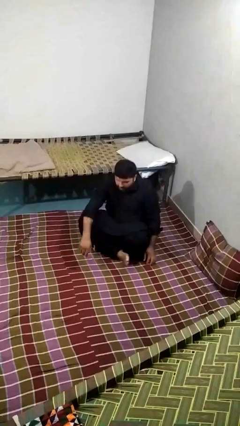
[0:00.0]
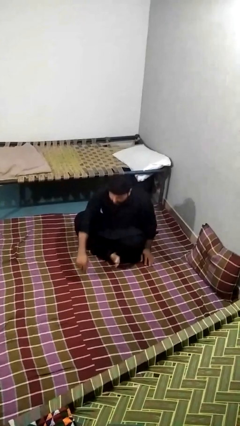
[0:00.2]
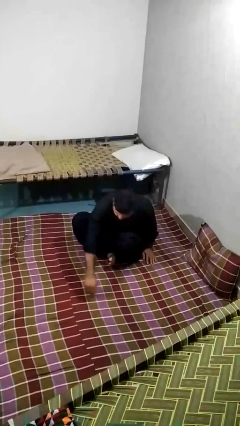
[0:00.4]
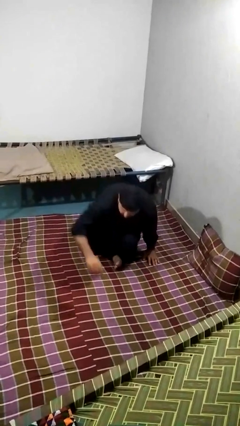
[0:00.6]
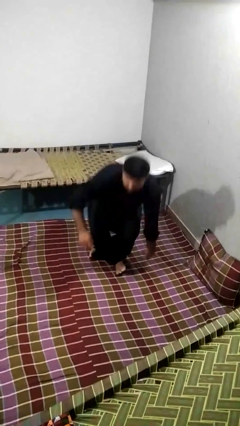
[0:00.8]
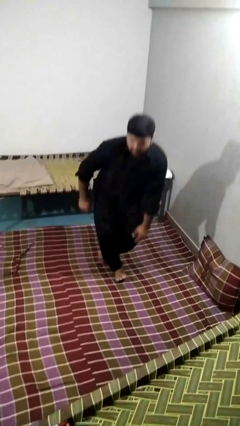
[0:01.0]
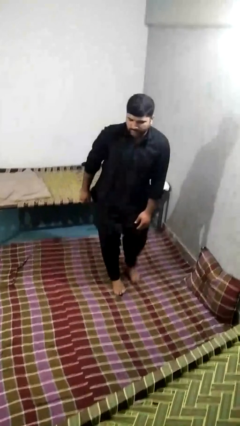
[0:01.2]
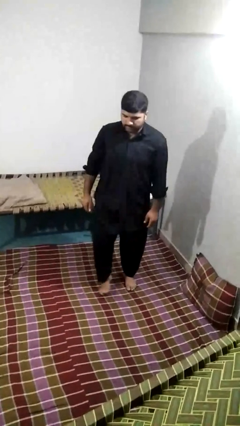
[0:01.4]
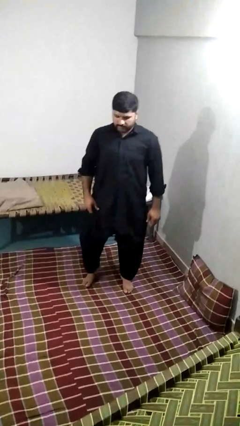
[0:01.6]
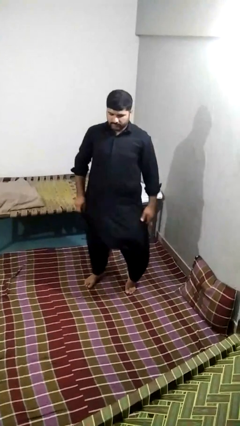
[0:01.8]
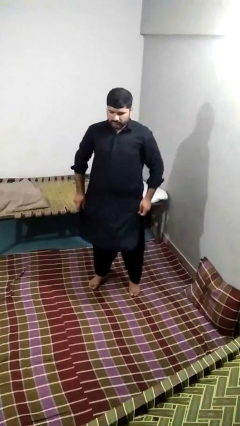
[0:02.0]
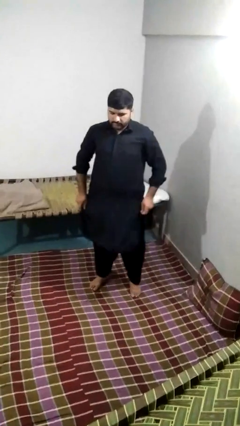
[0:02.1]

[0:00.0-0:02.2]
person stands up from floor

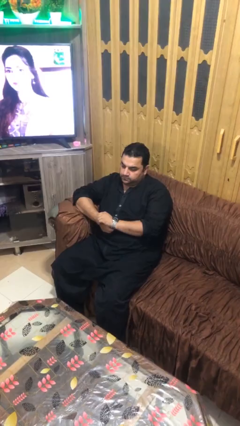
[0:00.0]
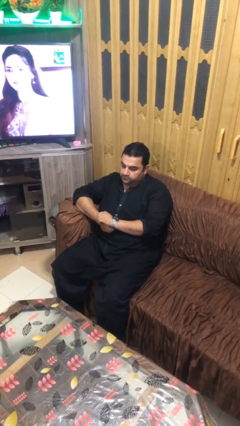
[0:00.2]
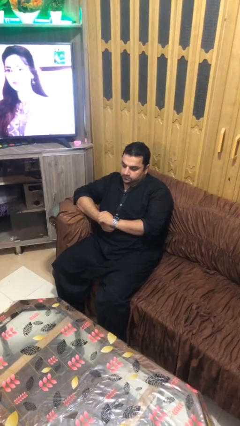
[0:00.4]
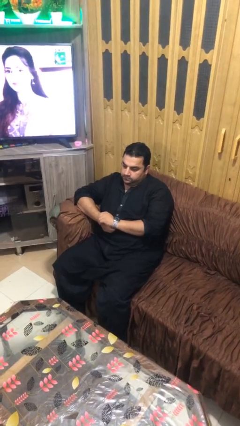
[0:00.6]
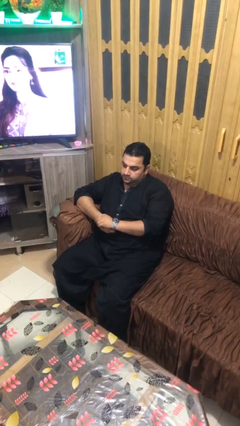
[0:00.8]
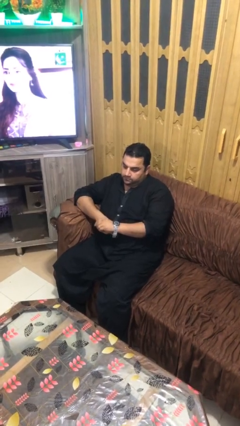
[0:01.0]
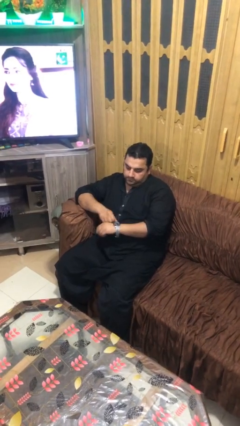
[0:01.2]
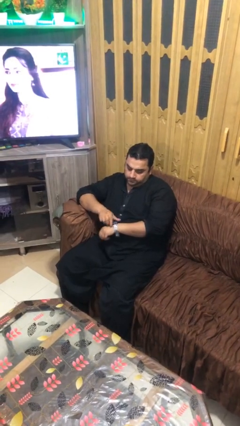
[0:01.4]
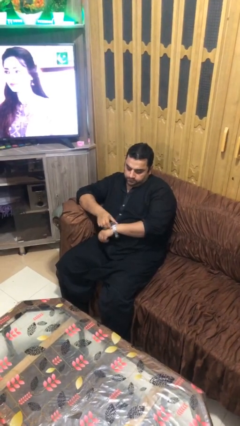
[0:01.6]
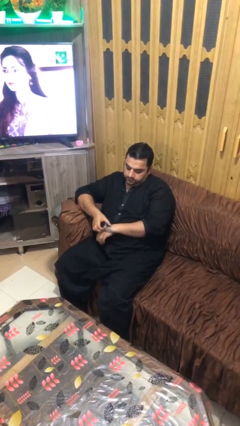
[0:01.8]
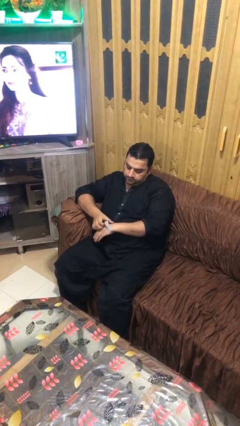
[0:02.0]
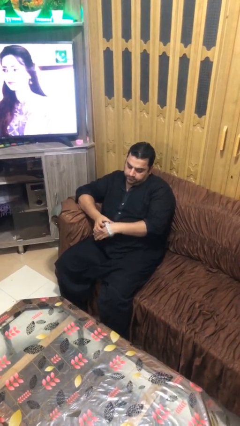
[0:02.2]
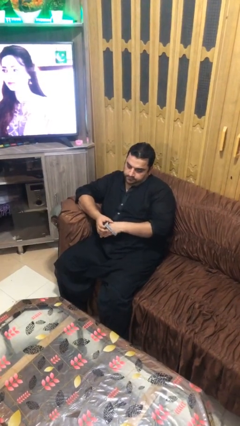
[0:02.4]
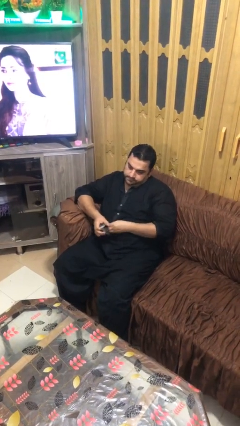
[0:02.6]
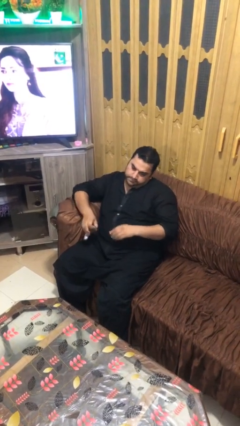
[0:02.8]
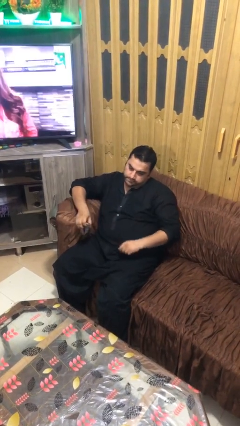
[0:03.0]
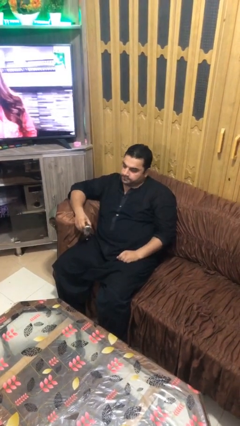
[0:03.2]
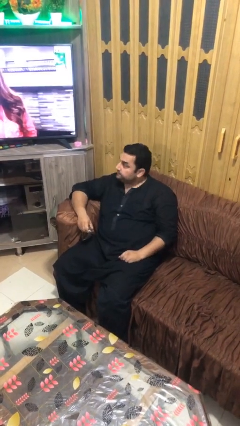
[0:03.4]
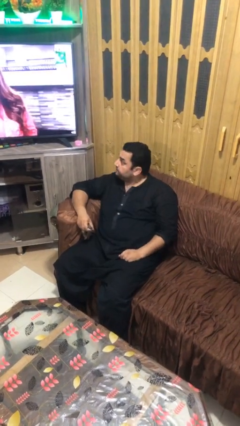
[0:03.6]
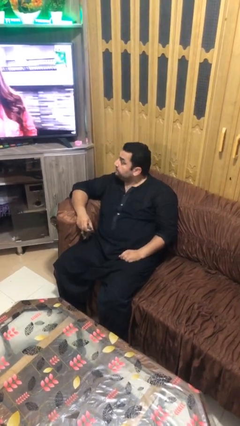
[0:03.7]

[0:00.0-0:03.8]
person takes off wristwatch

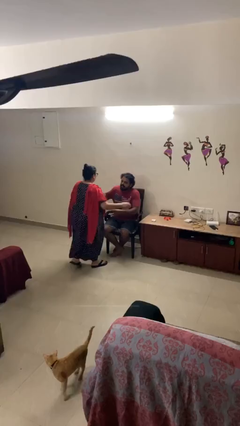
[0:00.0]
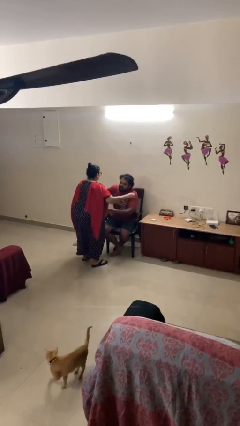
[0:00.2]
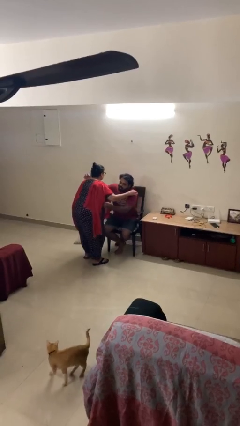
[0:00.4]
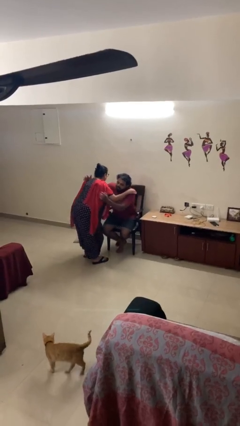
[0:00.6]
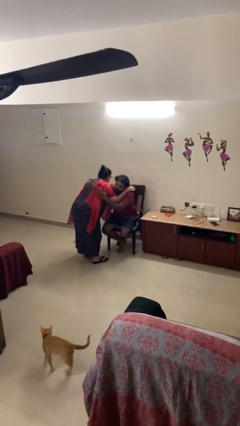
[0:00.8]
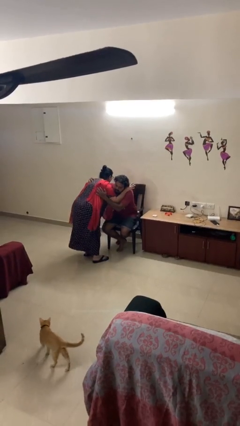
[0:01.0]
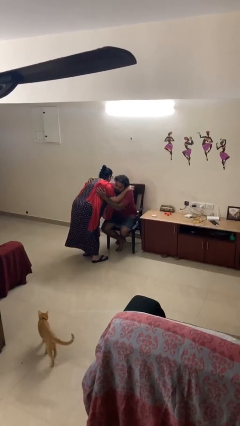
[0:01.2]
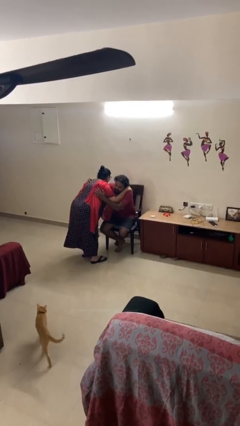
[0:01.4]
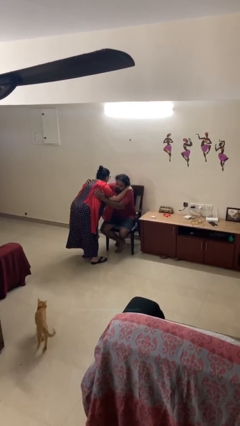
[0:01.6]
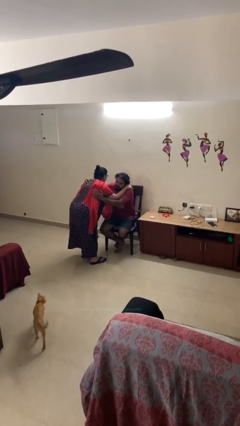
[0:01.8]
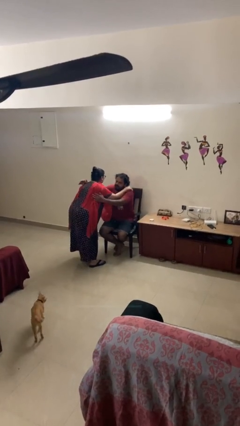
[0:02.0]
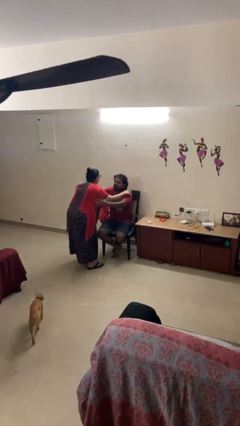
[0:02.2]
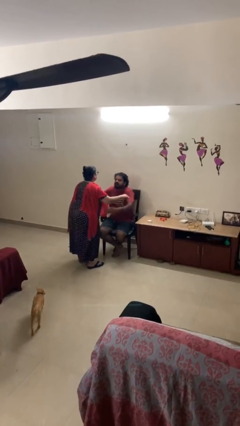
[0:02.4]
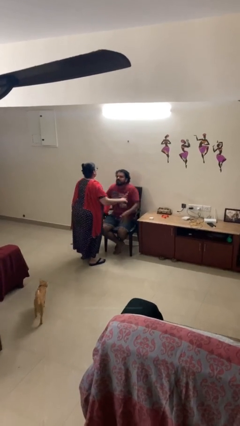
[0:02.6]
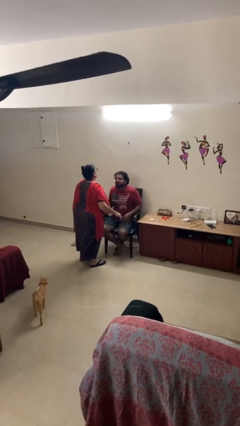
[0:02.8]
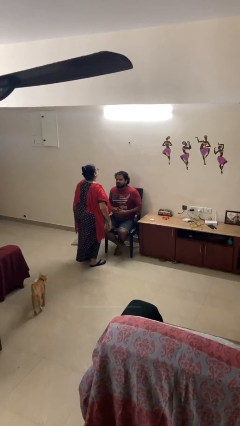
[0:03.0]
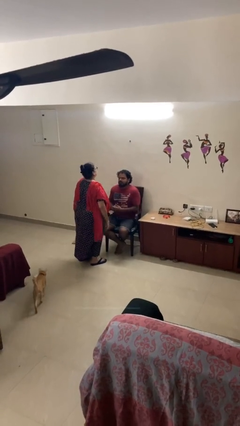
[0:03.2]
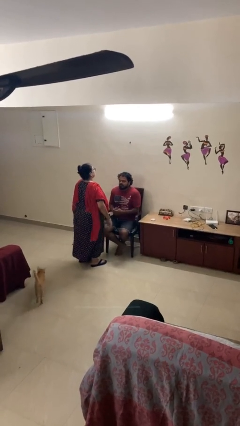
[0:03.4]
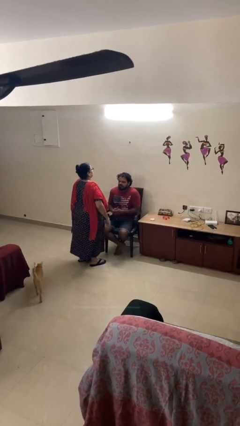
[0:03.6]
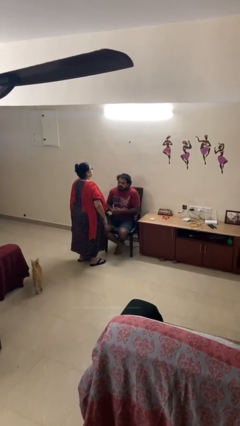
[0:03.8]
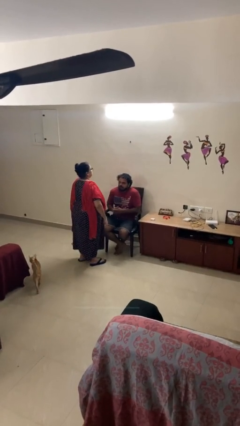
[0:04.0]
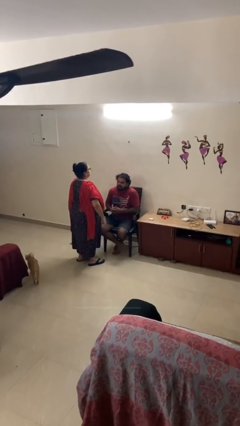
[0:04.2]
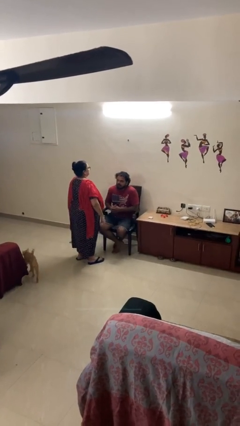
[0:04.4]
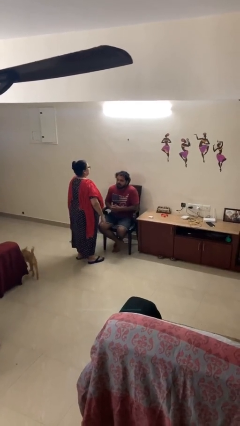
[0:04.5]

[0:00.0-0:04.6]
person embraces person

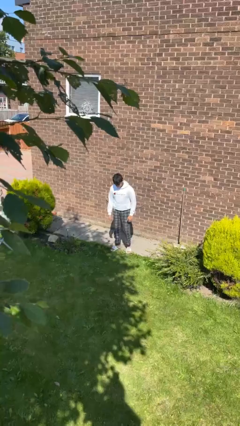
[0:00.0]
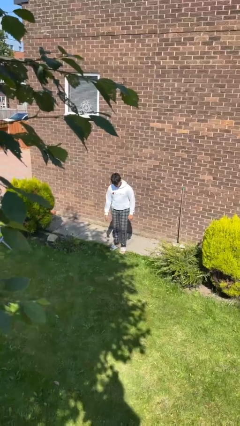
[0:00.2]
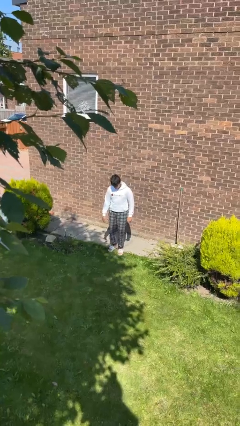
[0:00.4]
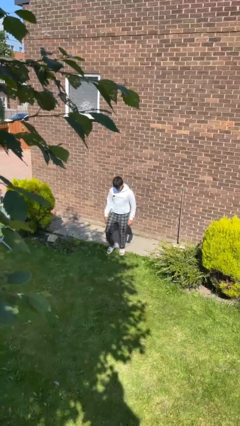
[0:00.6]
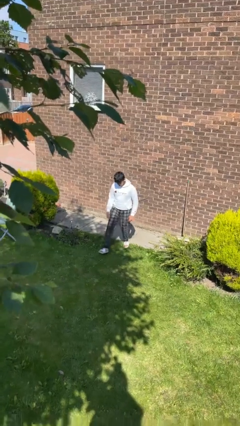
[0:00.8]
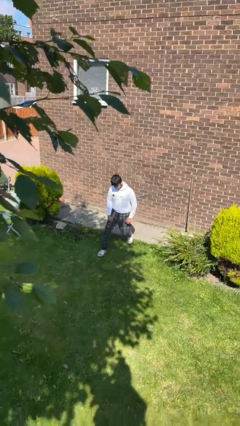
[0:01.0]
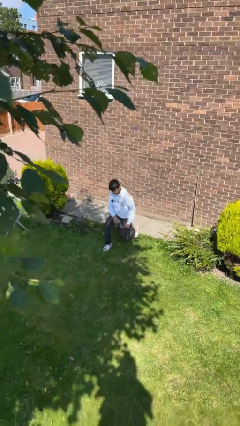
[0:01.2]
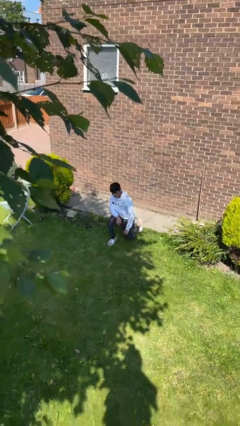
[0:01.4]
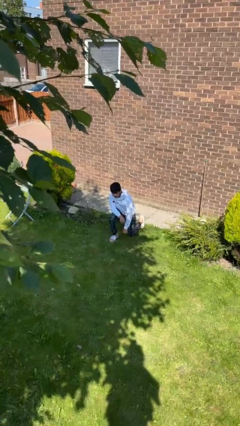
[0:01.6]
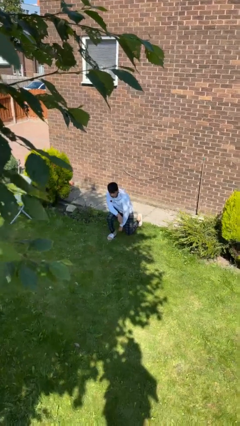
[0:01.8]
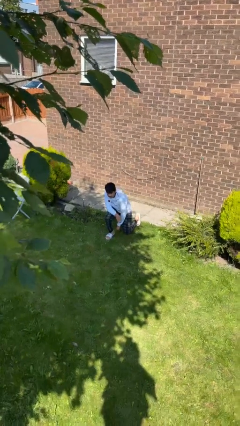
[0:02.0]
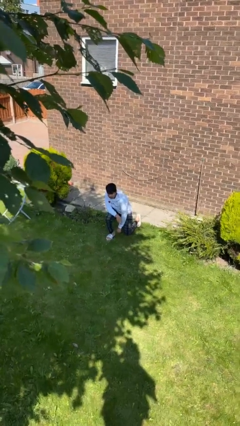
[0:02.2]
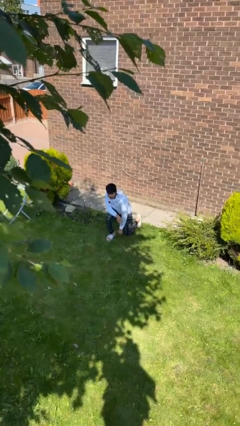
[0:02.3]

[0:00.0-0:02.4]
person kneels

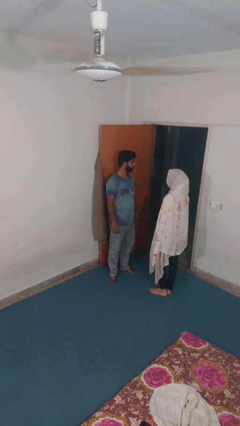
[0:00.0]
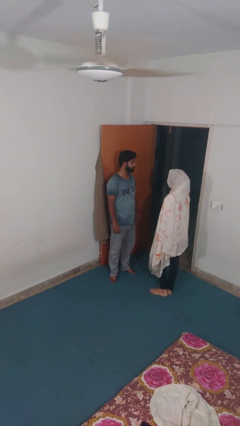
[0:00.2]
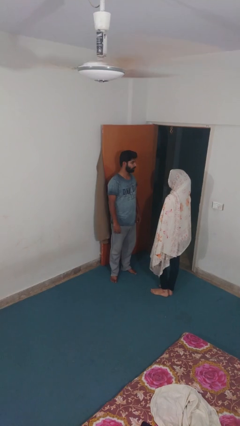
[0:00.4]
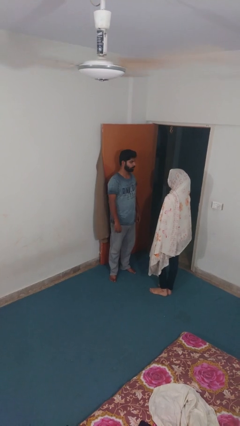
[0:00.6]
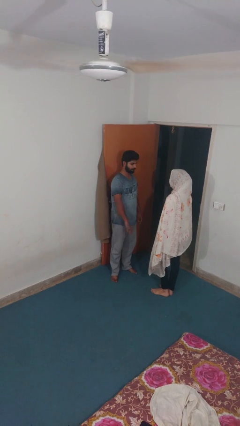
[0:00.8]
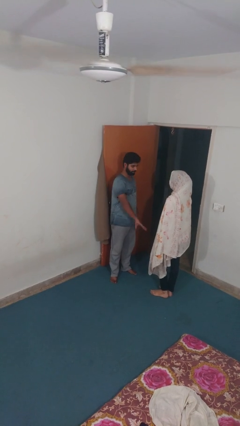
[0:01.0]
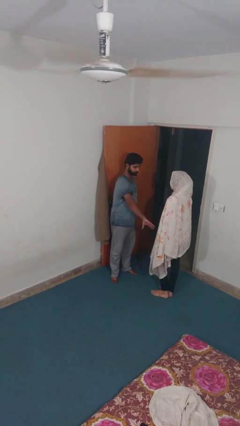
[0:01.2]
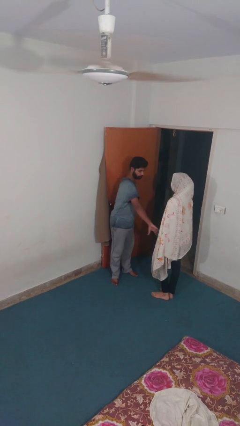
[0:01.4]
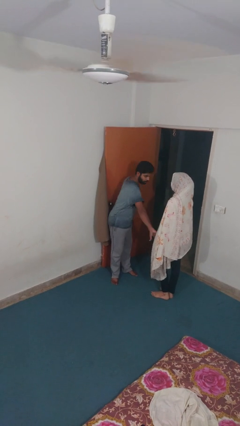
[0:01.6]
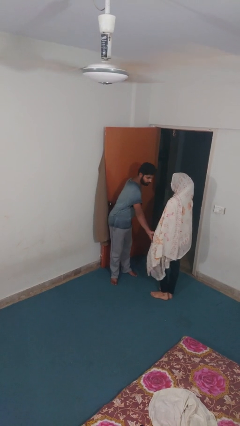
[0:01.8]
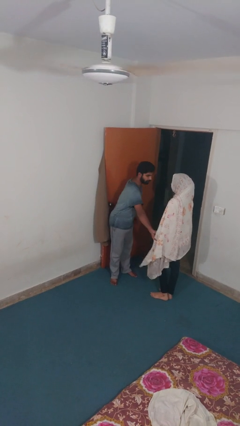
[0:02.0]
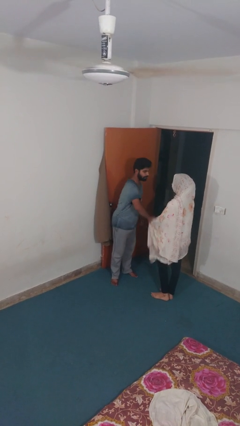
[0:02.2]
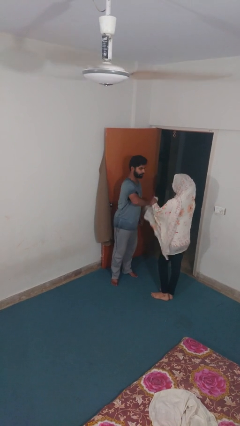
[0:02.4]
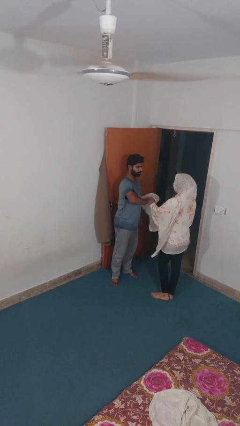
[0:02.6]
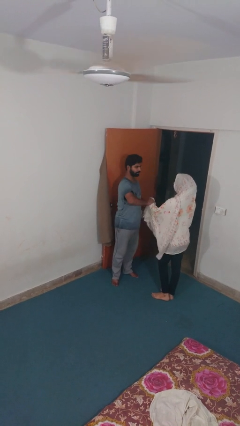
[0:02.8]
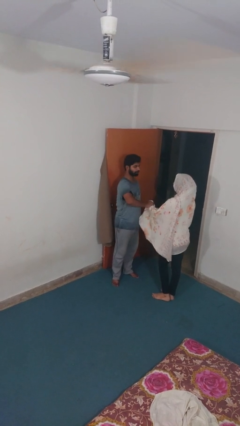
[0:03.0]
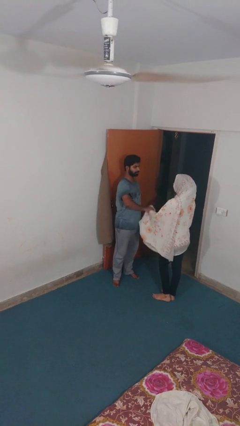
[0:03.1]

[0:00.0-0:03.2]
person grabs person by forearm

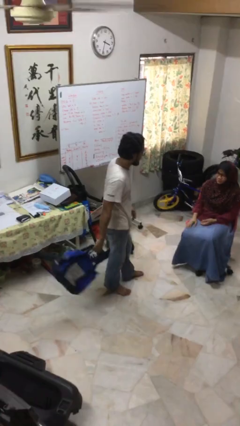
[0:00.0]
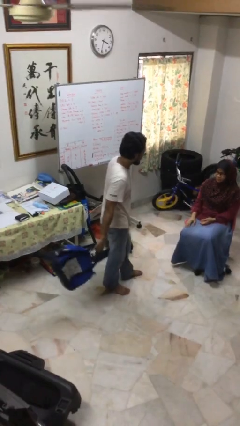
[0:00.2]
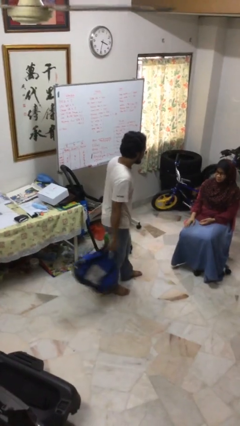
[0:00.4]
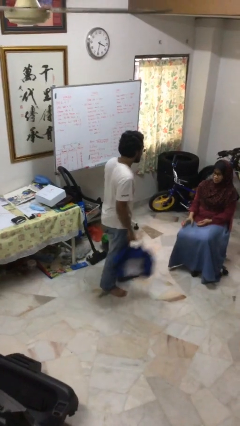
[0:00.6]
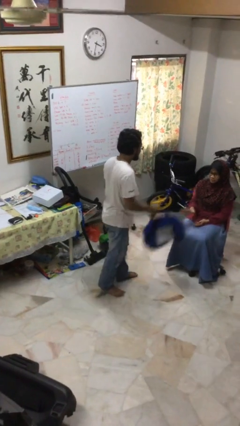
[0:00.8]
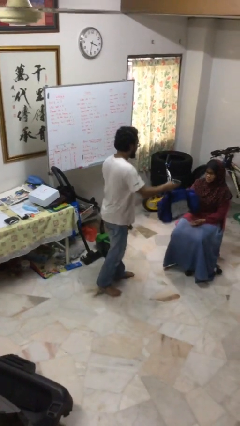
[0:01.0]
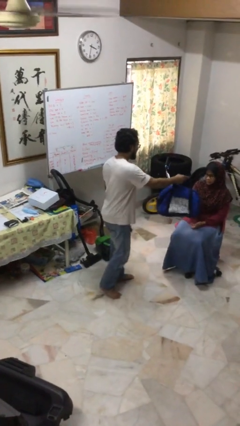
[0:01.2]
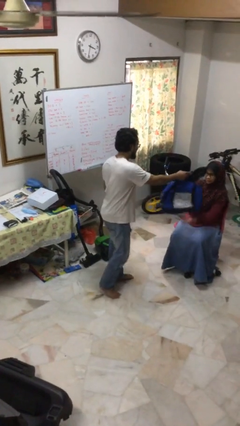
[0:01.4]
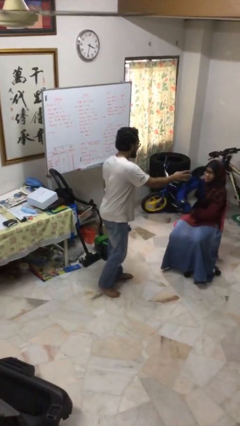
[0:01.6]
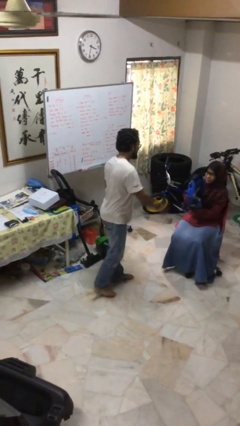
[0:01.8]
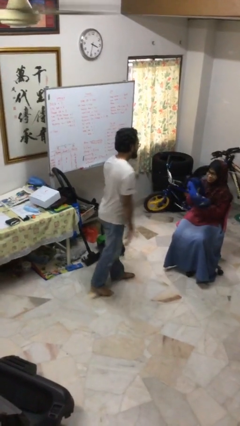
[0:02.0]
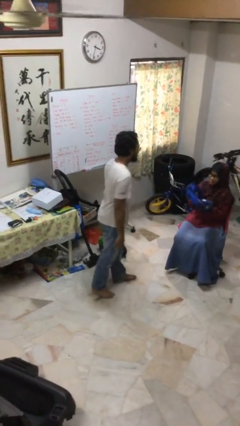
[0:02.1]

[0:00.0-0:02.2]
person transfers object to person
